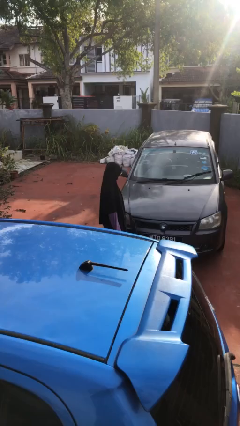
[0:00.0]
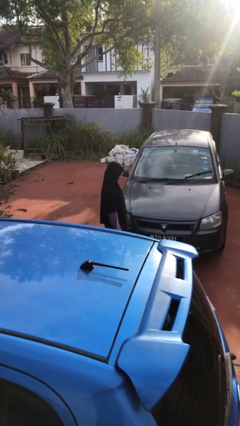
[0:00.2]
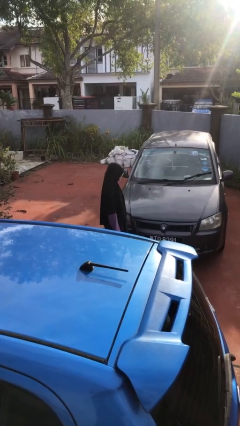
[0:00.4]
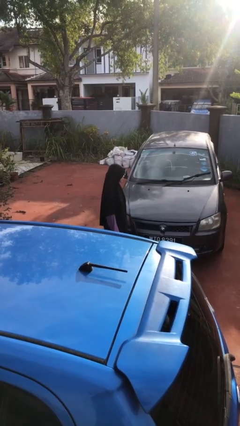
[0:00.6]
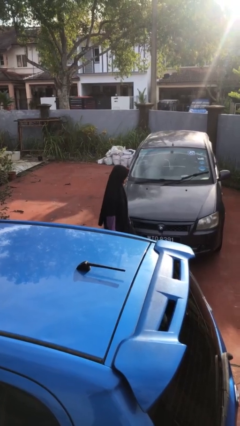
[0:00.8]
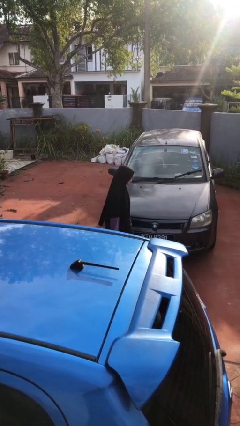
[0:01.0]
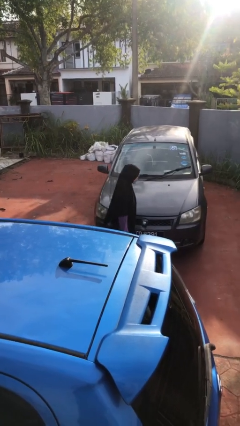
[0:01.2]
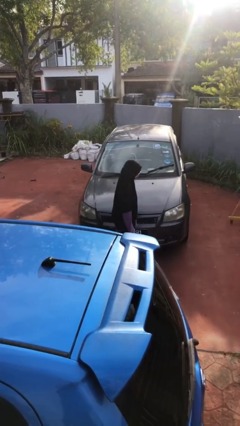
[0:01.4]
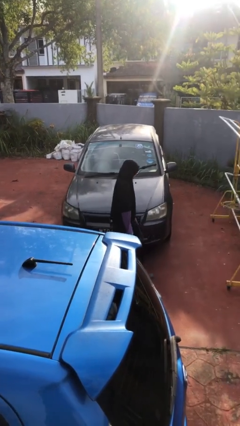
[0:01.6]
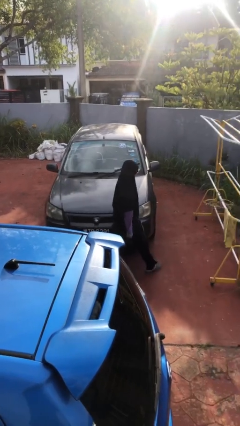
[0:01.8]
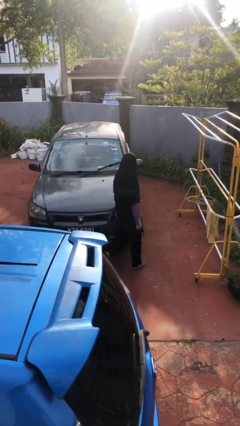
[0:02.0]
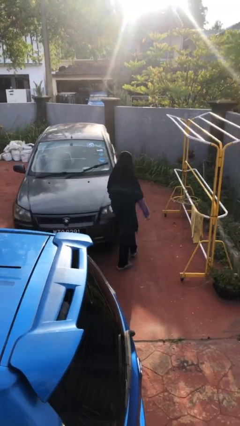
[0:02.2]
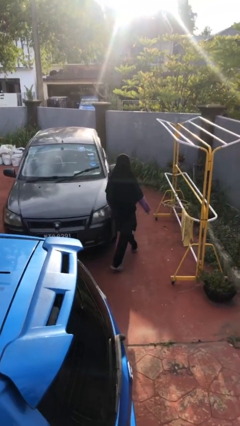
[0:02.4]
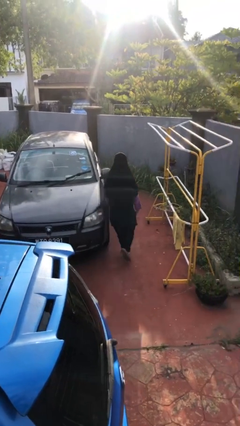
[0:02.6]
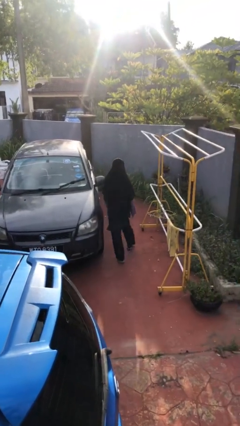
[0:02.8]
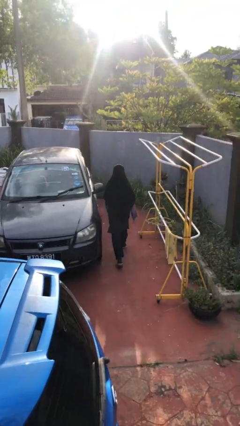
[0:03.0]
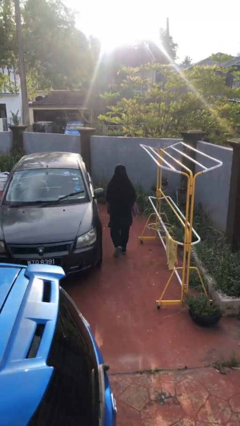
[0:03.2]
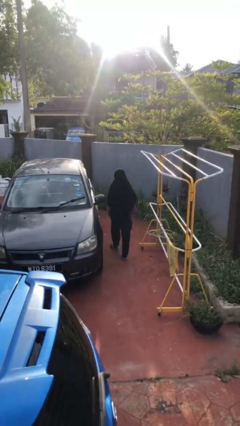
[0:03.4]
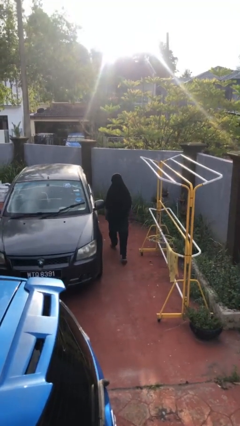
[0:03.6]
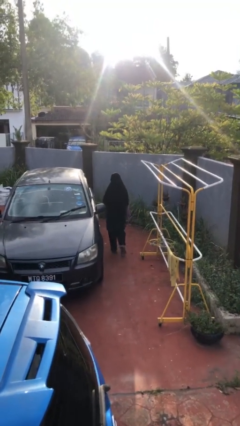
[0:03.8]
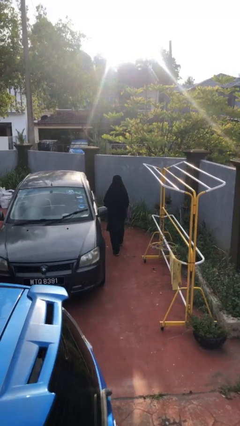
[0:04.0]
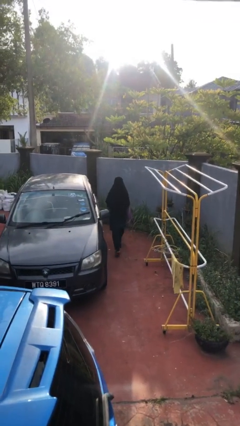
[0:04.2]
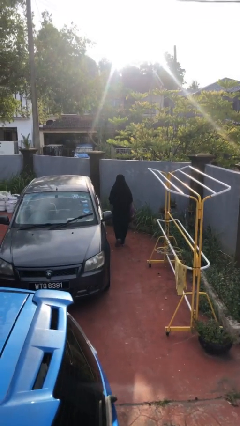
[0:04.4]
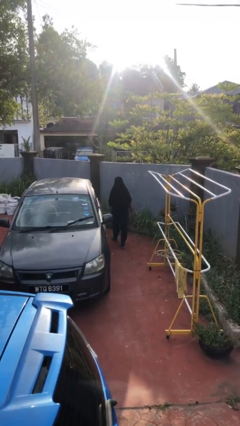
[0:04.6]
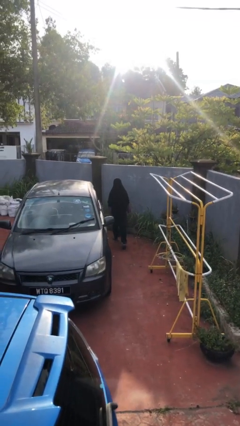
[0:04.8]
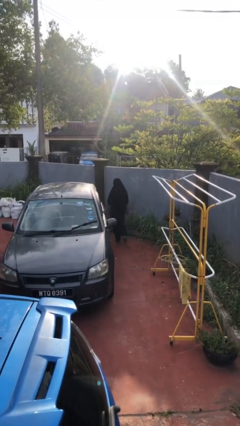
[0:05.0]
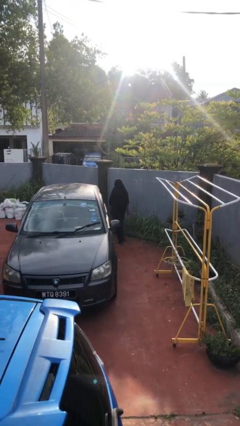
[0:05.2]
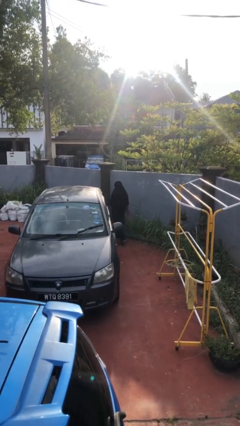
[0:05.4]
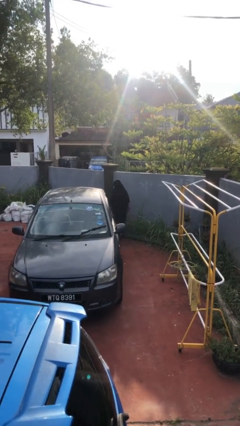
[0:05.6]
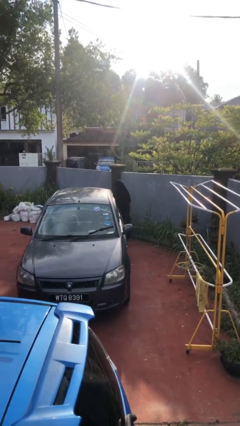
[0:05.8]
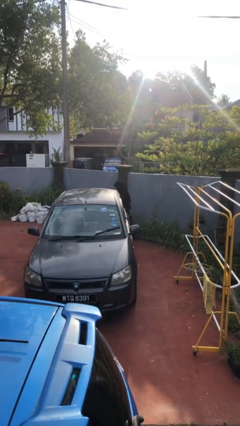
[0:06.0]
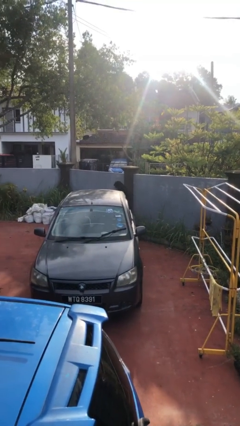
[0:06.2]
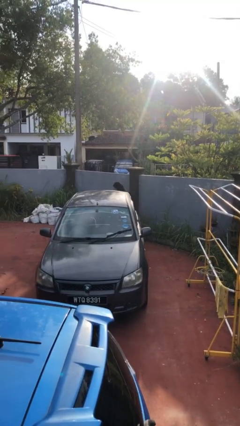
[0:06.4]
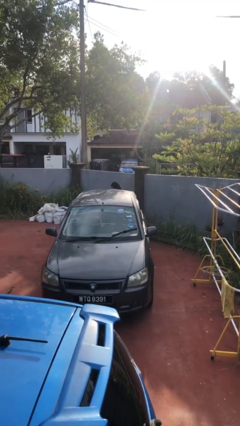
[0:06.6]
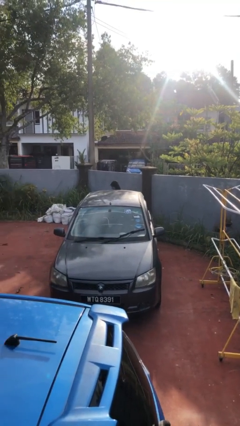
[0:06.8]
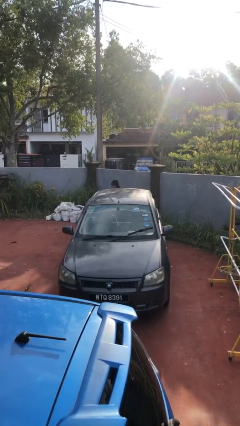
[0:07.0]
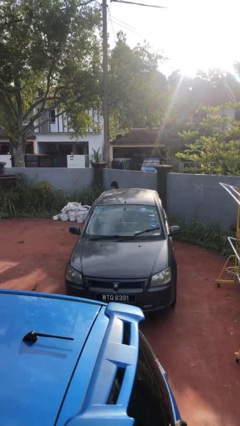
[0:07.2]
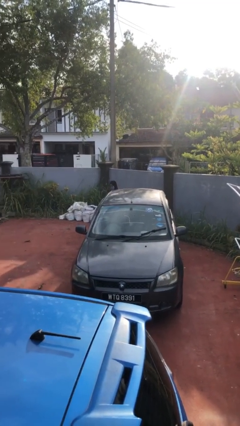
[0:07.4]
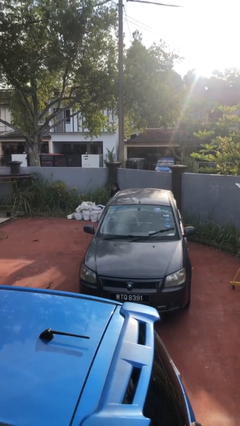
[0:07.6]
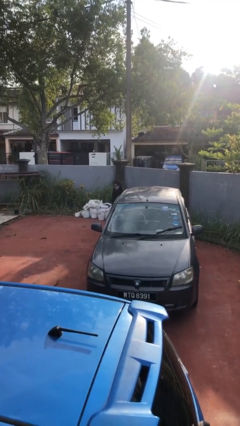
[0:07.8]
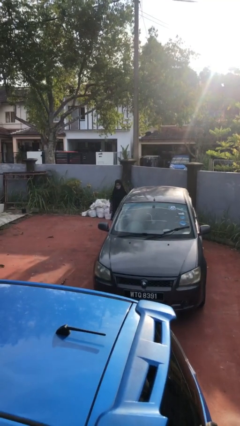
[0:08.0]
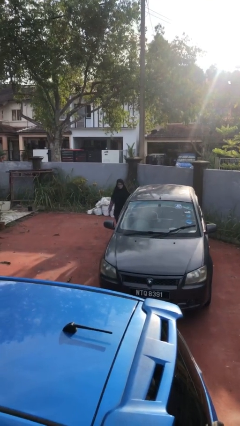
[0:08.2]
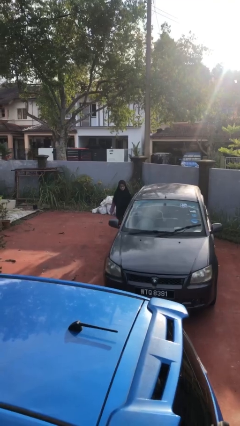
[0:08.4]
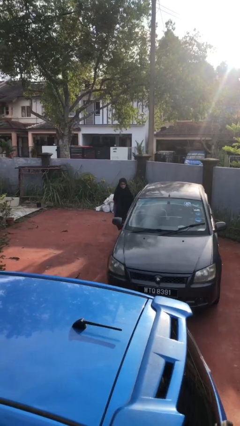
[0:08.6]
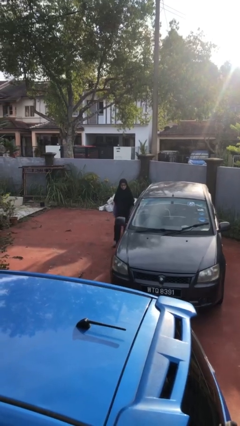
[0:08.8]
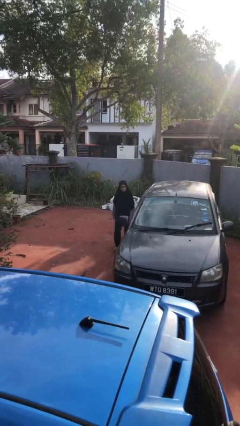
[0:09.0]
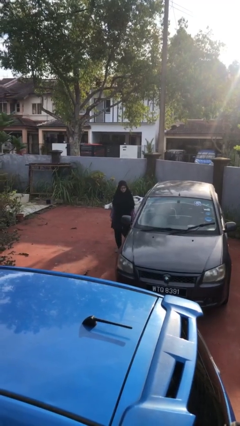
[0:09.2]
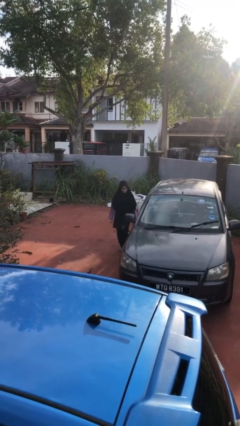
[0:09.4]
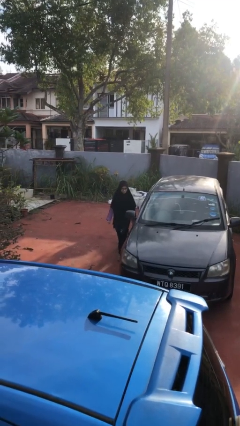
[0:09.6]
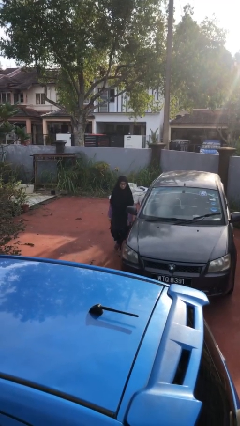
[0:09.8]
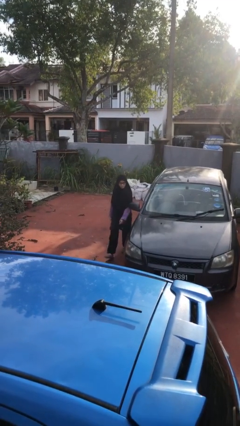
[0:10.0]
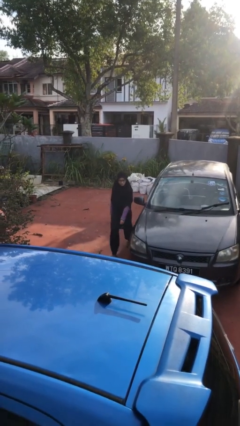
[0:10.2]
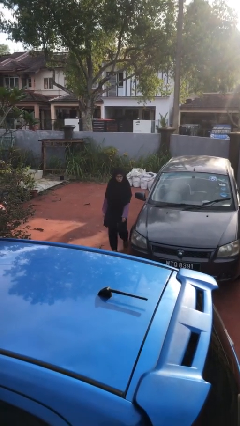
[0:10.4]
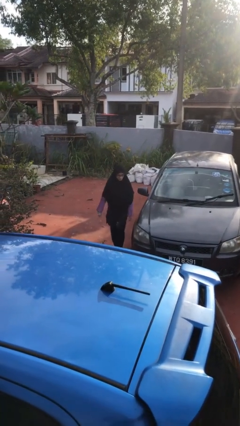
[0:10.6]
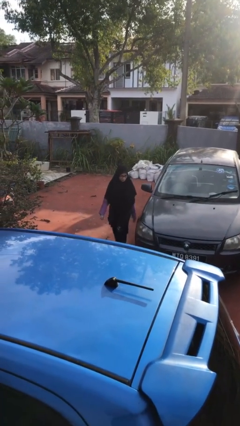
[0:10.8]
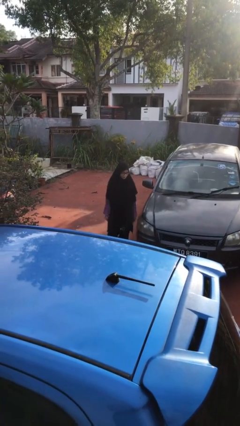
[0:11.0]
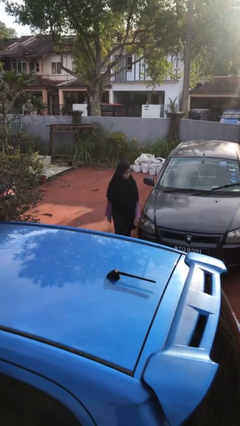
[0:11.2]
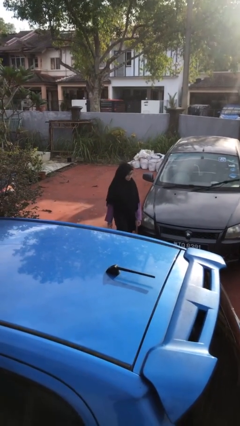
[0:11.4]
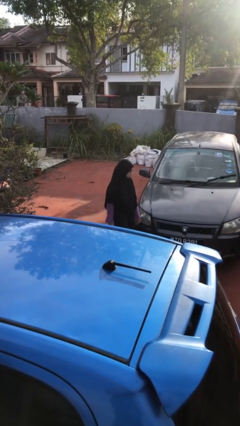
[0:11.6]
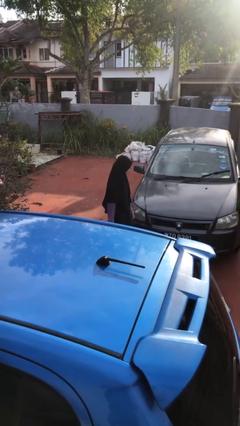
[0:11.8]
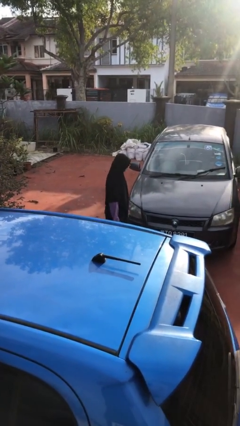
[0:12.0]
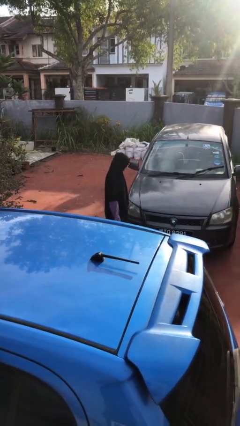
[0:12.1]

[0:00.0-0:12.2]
person walks around car

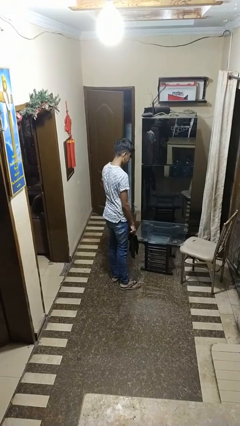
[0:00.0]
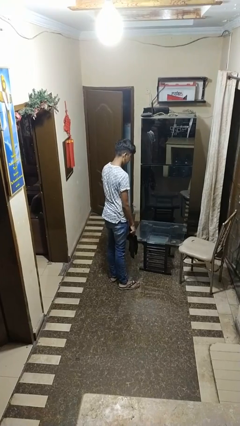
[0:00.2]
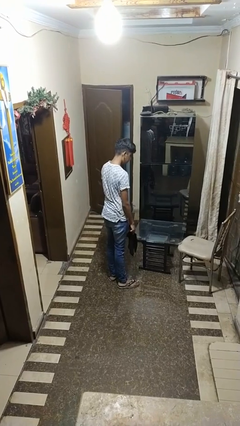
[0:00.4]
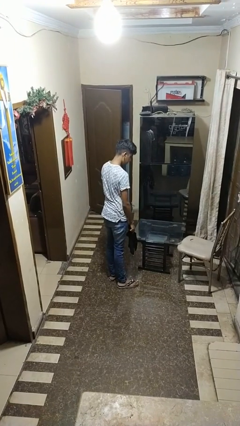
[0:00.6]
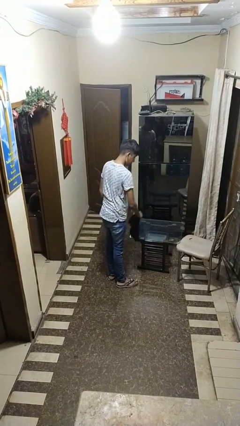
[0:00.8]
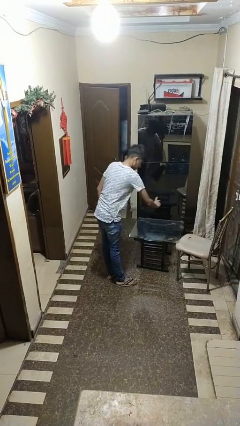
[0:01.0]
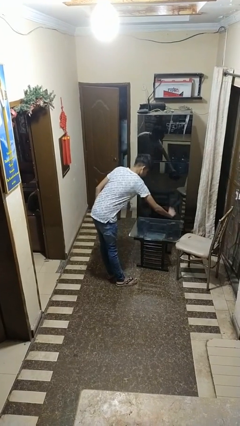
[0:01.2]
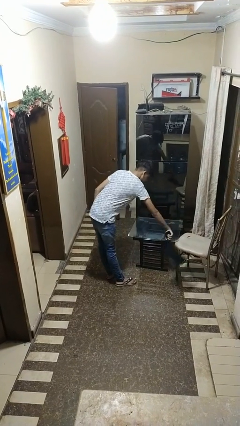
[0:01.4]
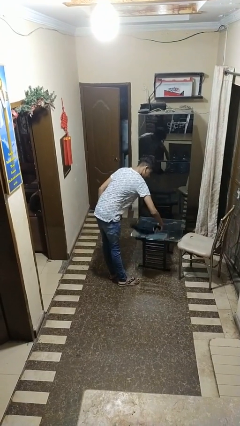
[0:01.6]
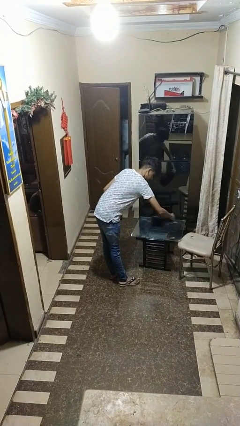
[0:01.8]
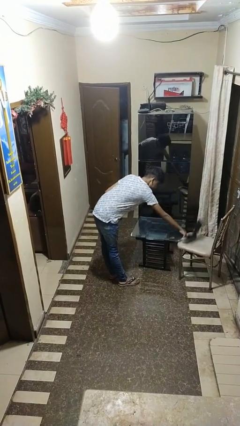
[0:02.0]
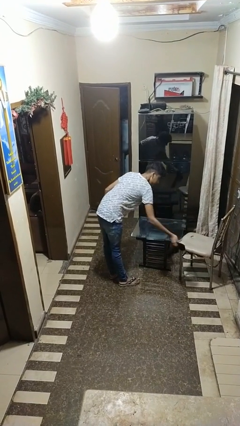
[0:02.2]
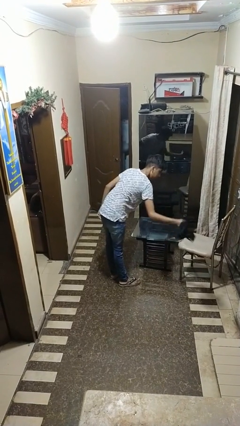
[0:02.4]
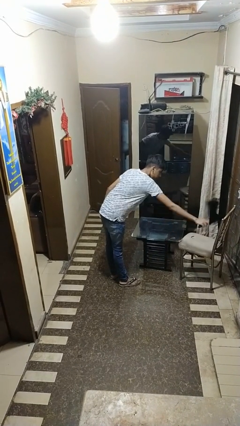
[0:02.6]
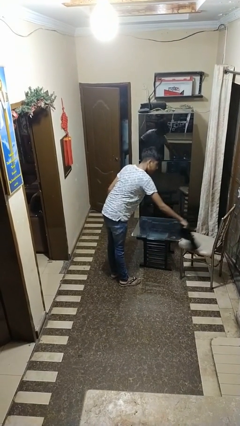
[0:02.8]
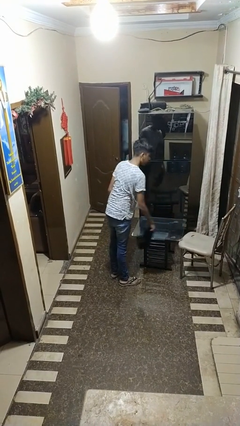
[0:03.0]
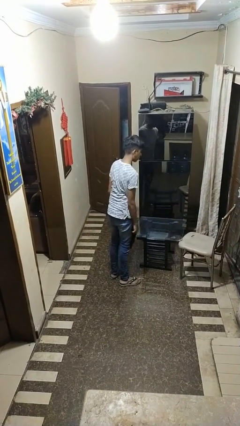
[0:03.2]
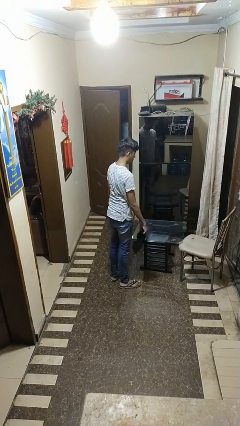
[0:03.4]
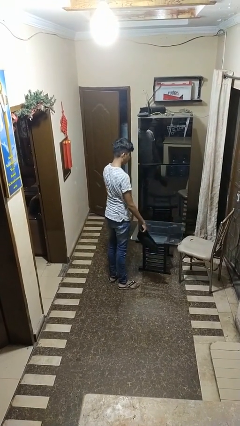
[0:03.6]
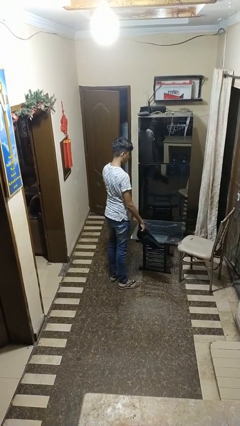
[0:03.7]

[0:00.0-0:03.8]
person dusts furniture

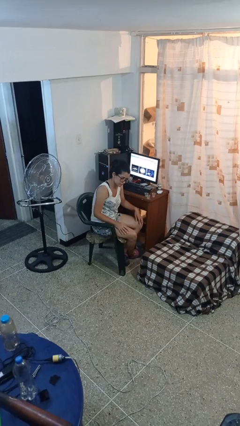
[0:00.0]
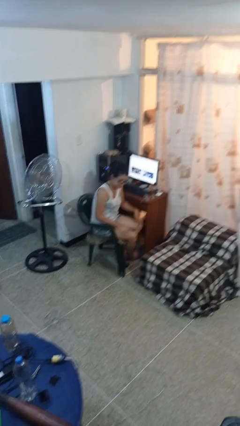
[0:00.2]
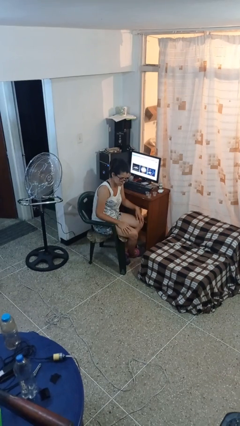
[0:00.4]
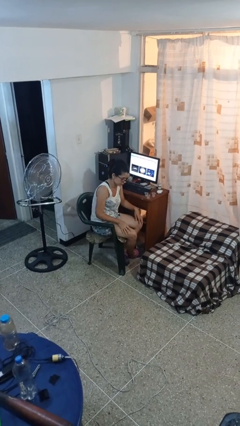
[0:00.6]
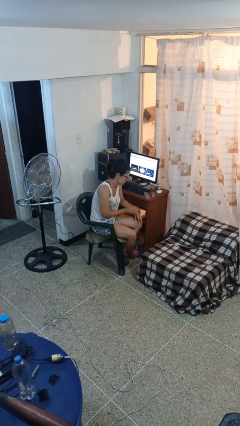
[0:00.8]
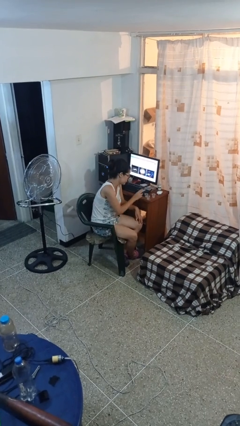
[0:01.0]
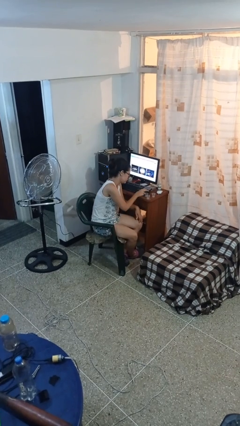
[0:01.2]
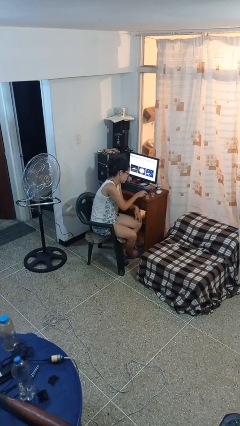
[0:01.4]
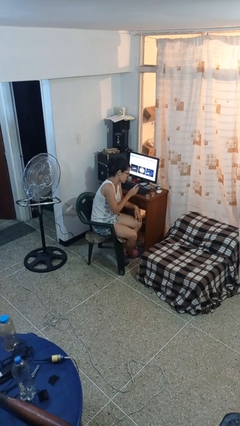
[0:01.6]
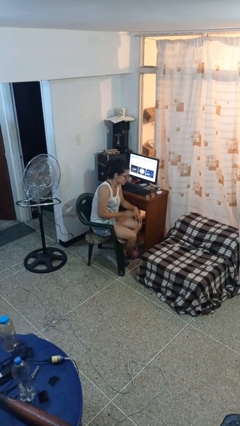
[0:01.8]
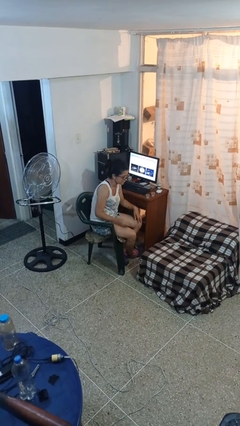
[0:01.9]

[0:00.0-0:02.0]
person picks up object from table

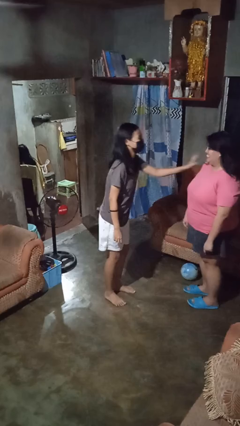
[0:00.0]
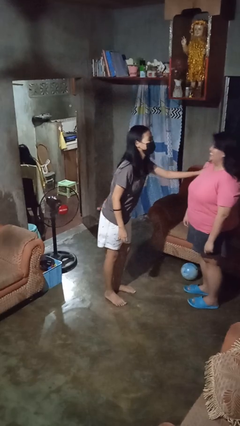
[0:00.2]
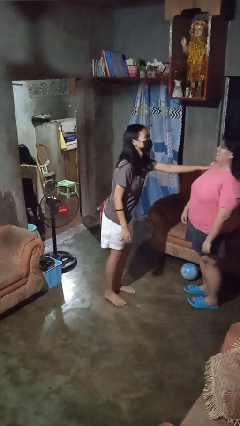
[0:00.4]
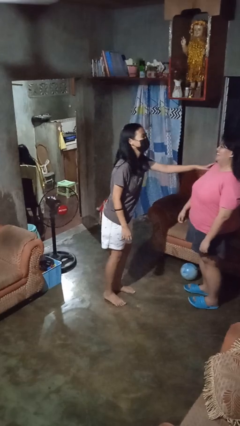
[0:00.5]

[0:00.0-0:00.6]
person shoves person
